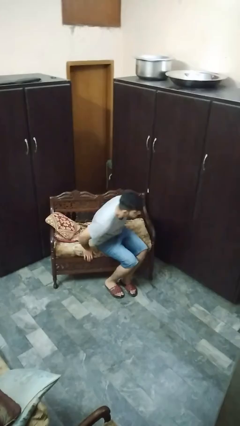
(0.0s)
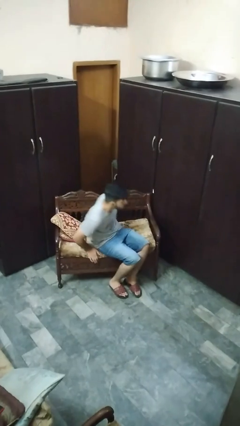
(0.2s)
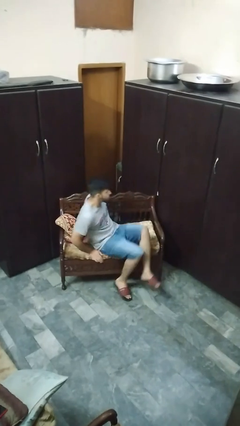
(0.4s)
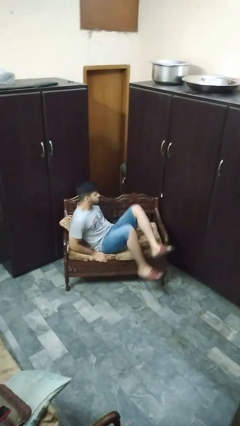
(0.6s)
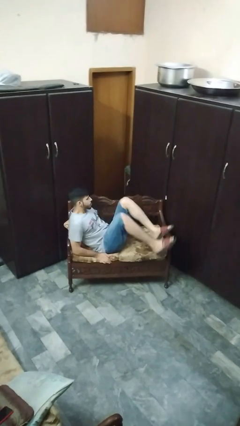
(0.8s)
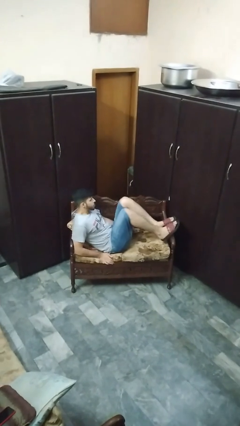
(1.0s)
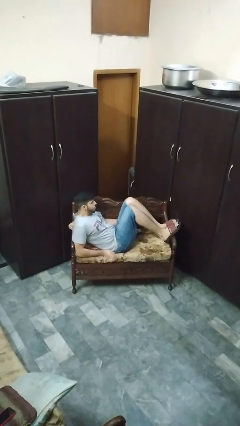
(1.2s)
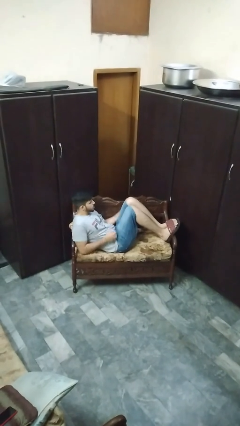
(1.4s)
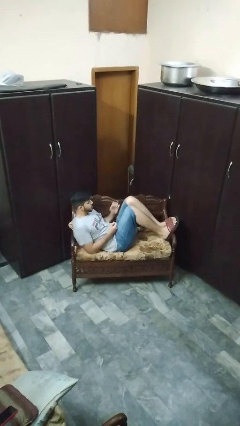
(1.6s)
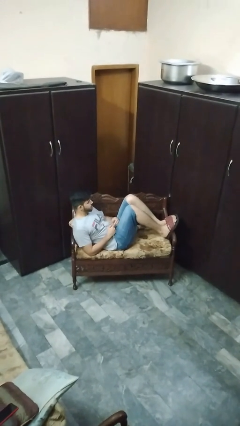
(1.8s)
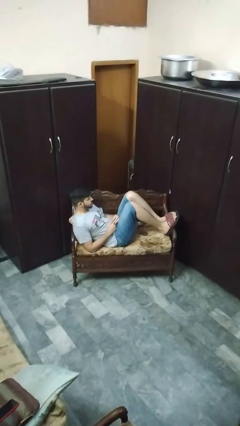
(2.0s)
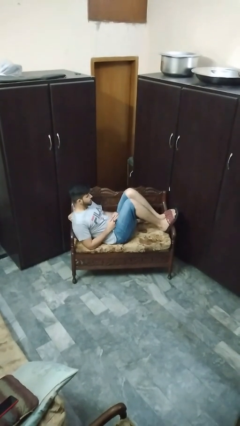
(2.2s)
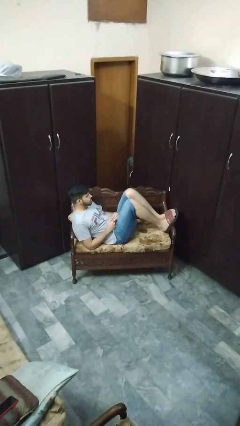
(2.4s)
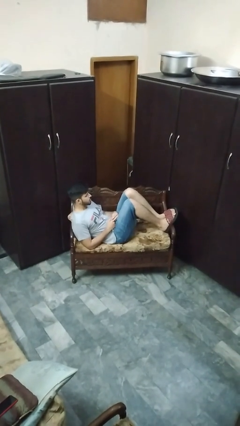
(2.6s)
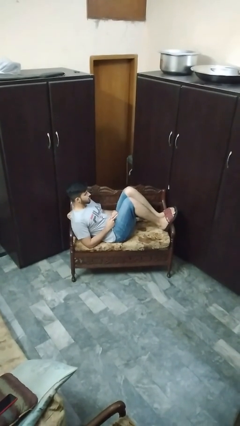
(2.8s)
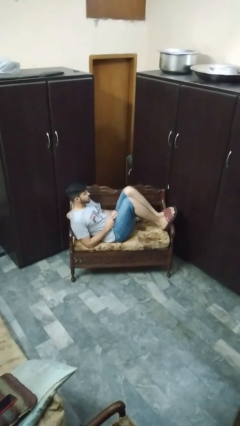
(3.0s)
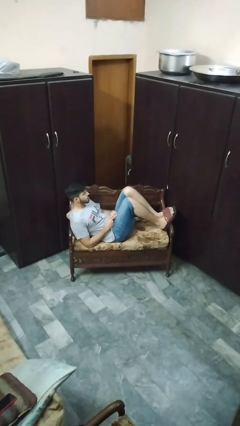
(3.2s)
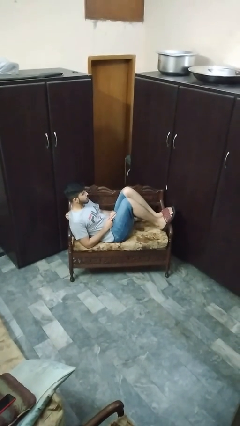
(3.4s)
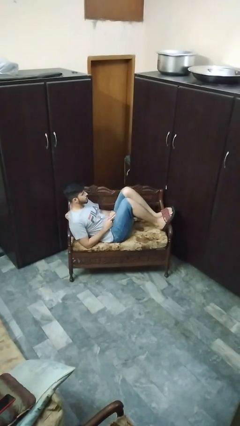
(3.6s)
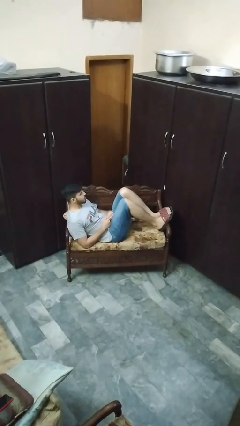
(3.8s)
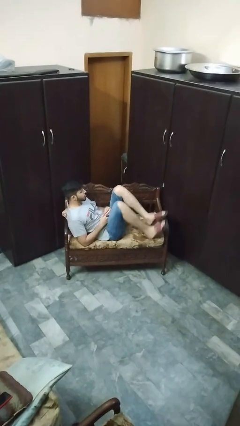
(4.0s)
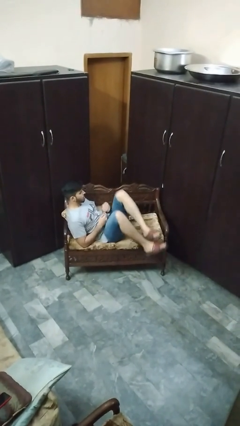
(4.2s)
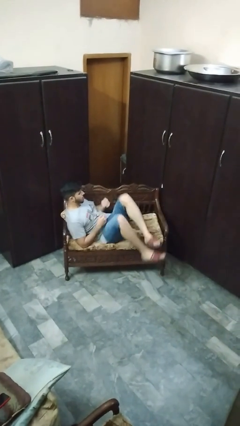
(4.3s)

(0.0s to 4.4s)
person lies down on couch

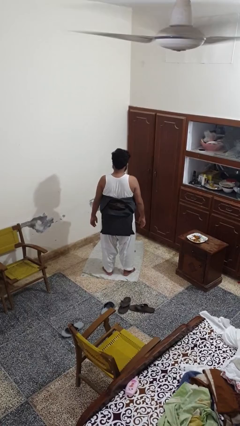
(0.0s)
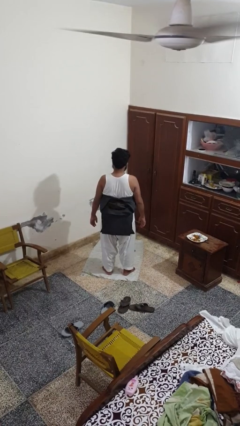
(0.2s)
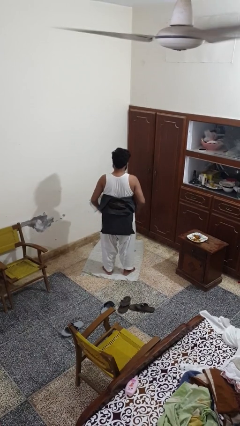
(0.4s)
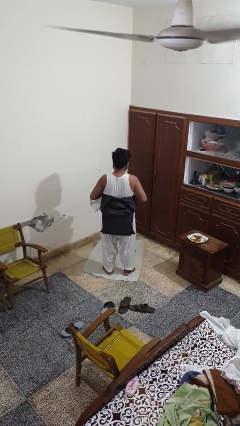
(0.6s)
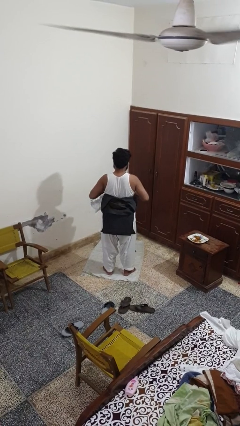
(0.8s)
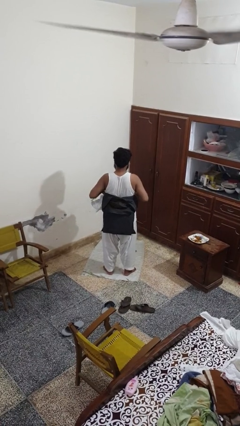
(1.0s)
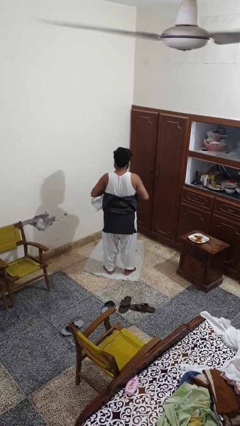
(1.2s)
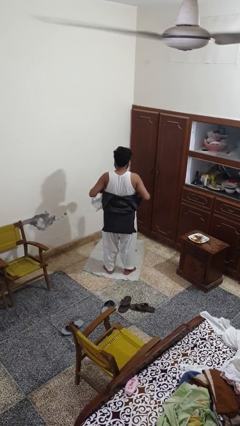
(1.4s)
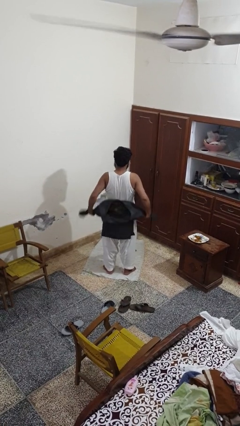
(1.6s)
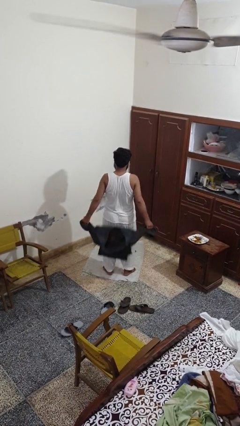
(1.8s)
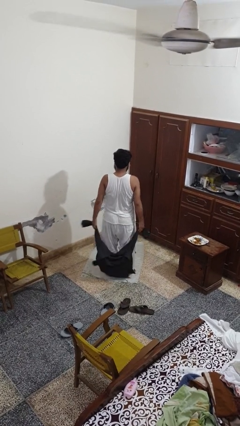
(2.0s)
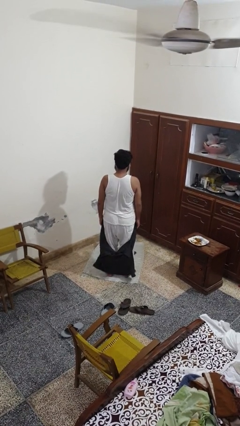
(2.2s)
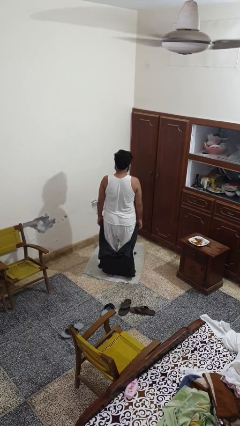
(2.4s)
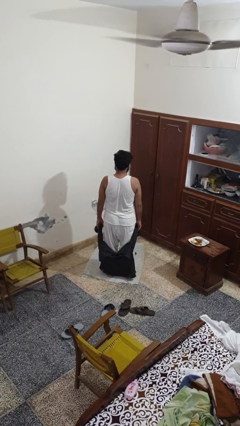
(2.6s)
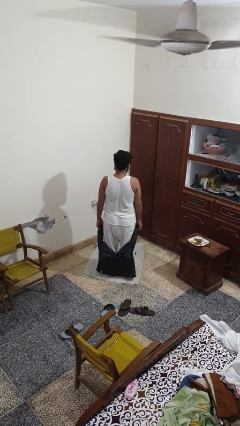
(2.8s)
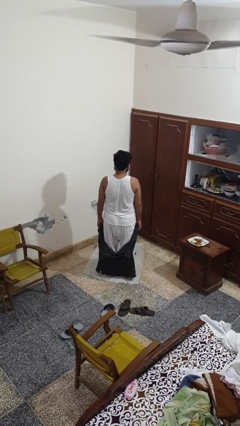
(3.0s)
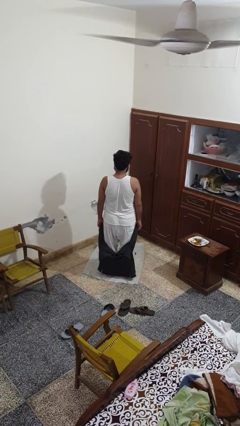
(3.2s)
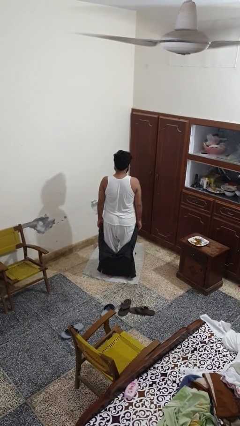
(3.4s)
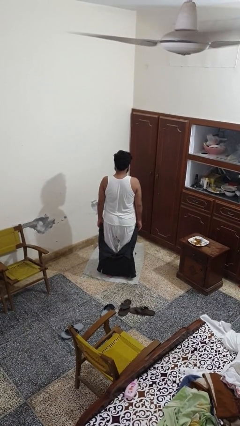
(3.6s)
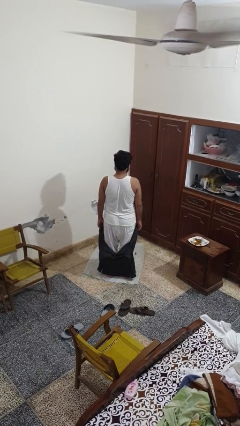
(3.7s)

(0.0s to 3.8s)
person unties jacket around waist

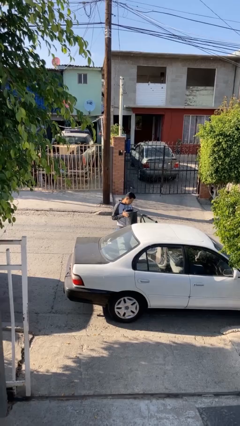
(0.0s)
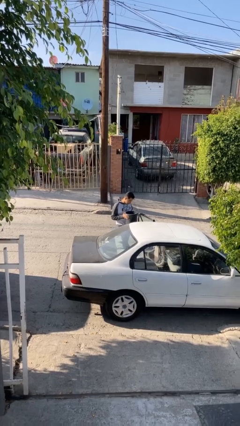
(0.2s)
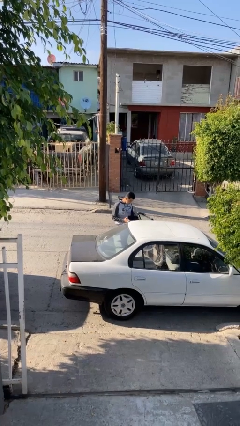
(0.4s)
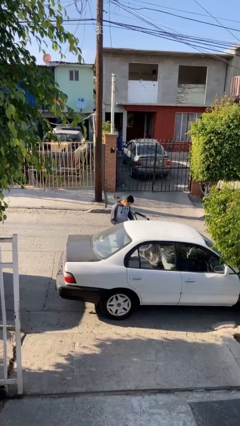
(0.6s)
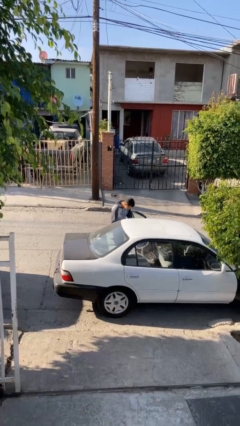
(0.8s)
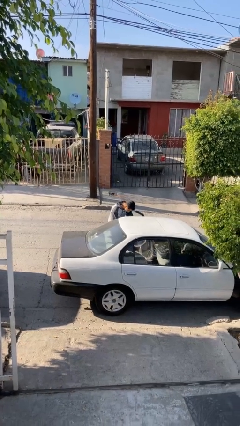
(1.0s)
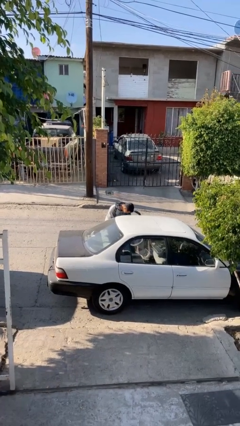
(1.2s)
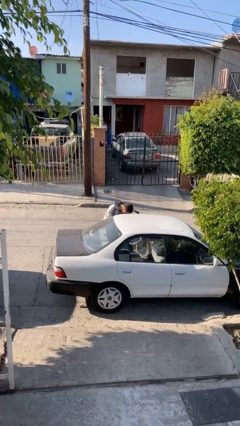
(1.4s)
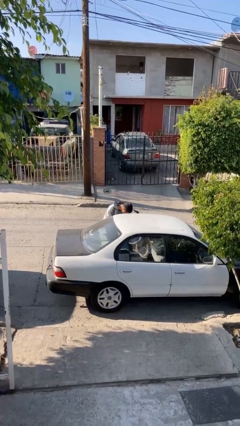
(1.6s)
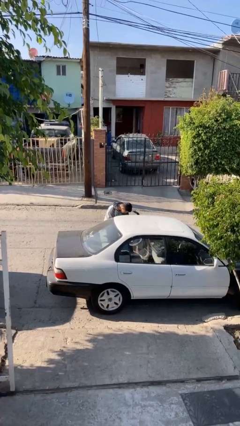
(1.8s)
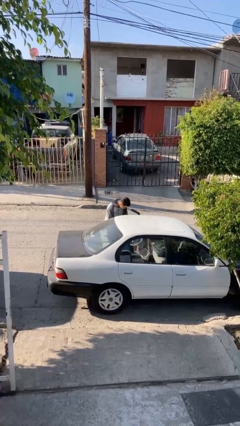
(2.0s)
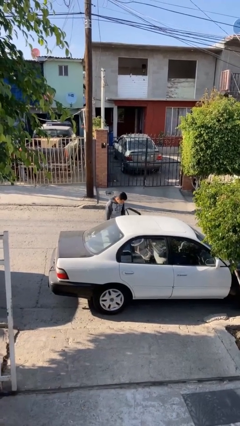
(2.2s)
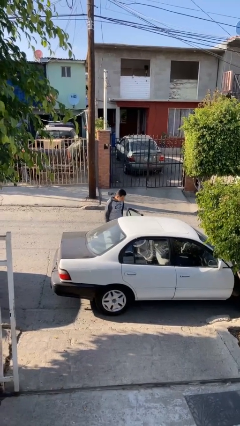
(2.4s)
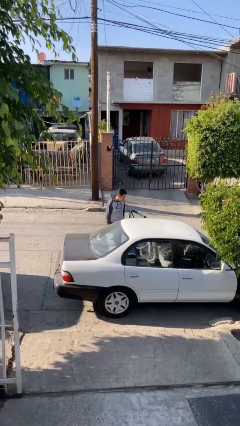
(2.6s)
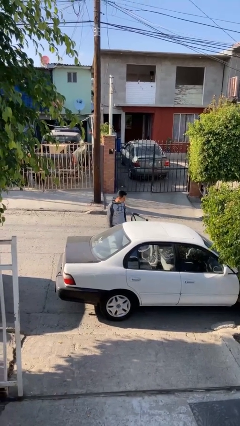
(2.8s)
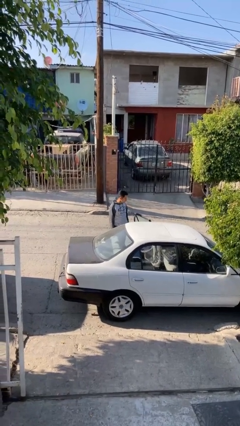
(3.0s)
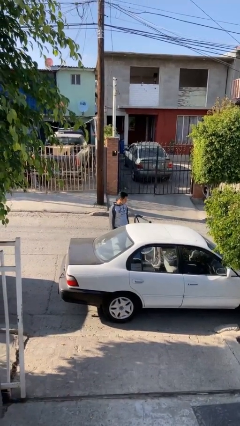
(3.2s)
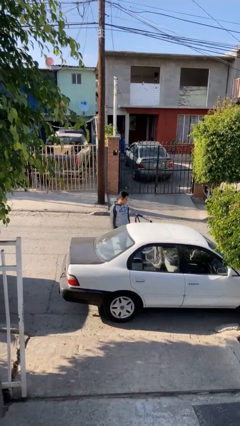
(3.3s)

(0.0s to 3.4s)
person loads car

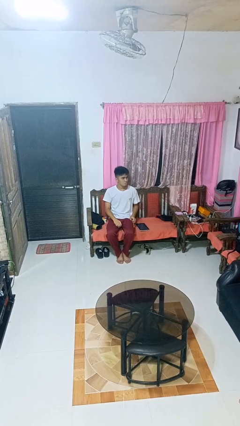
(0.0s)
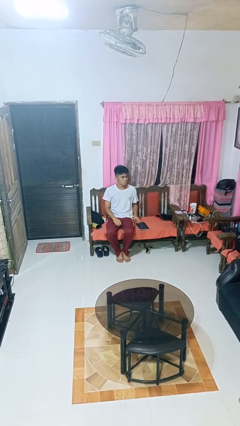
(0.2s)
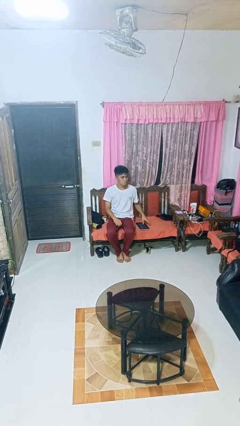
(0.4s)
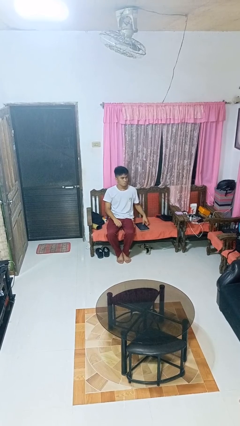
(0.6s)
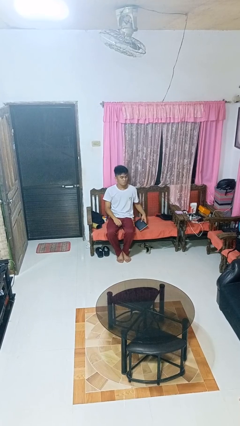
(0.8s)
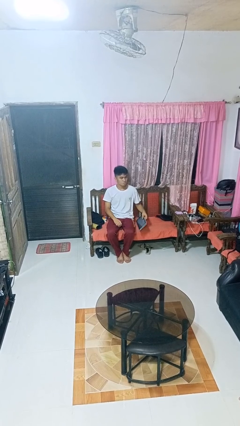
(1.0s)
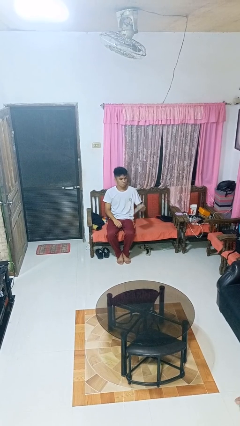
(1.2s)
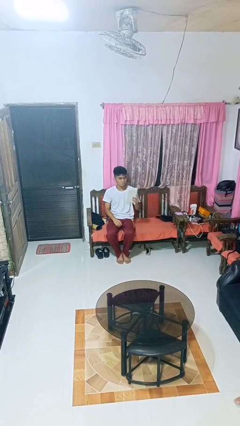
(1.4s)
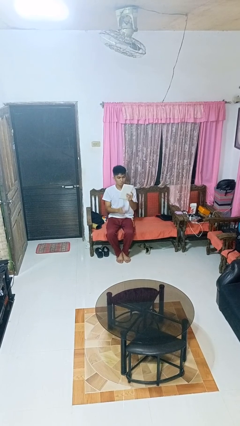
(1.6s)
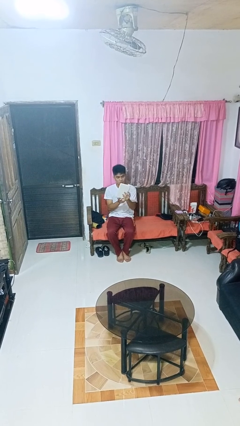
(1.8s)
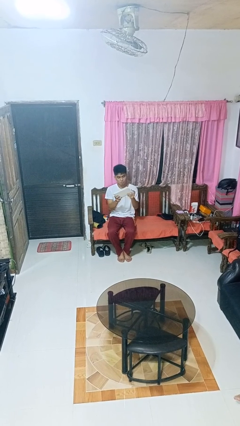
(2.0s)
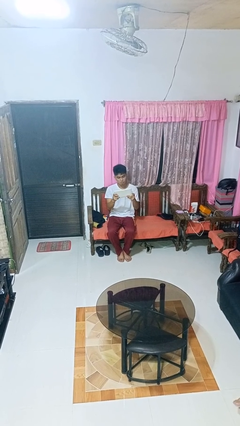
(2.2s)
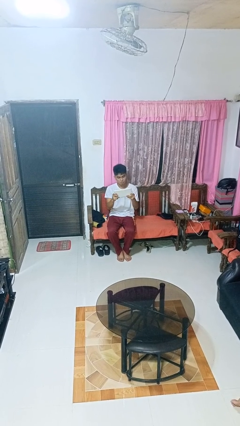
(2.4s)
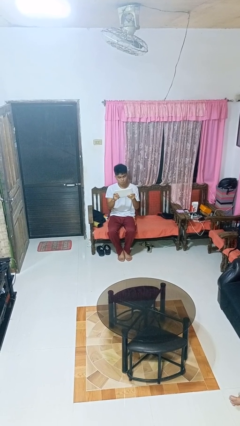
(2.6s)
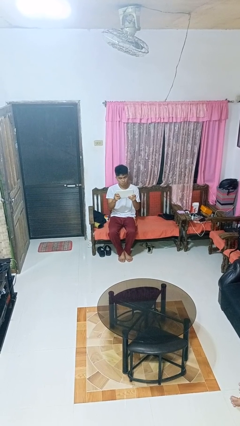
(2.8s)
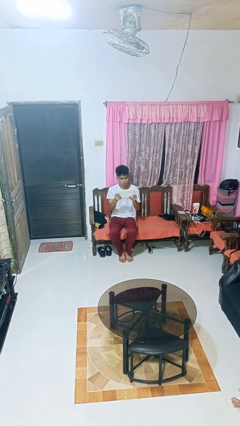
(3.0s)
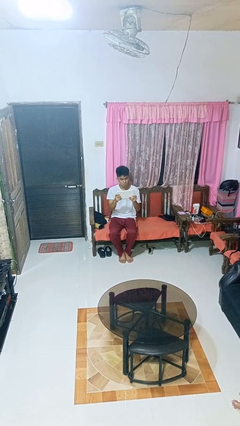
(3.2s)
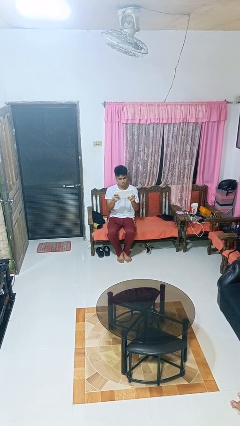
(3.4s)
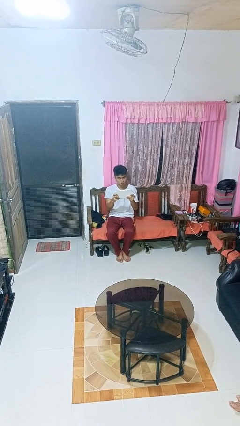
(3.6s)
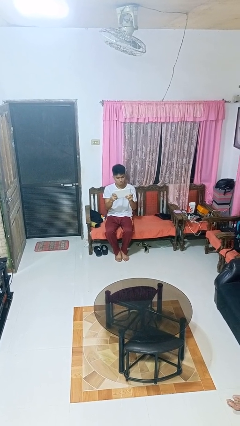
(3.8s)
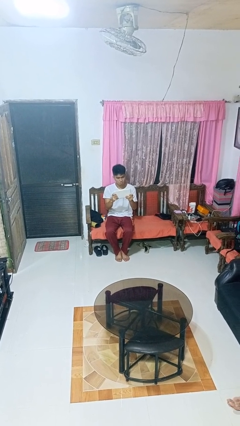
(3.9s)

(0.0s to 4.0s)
person interacts with tablet

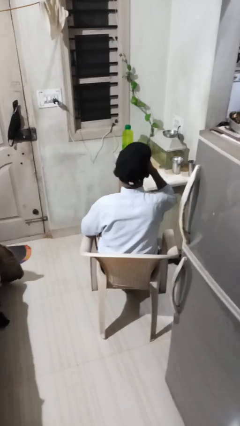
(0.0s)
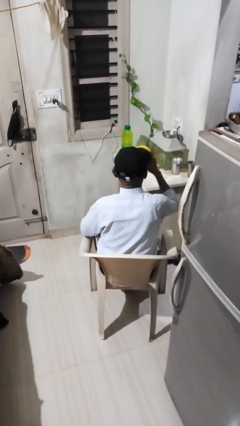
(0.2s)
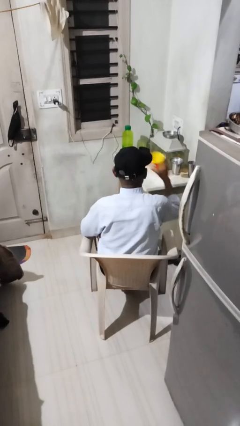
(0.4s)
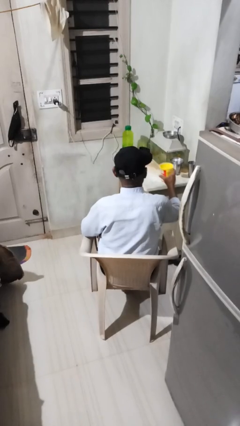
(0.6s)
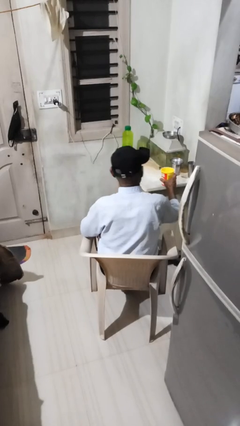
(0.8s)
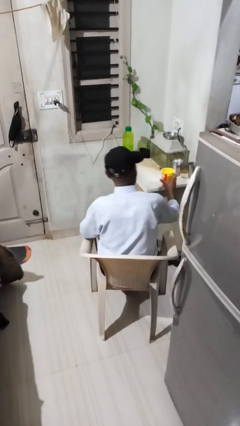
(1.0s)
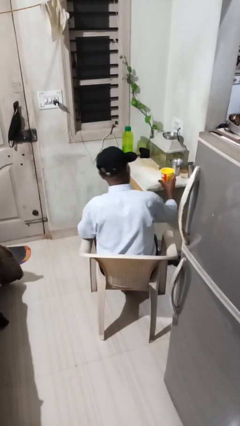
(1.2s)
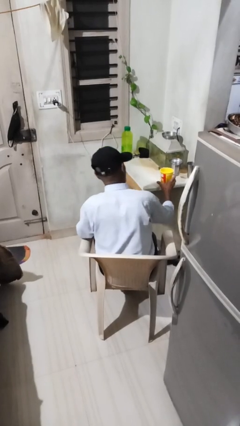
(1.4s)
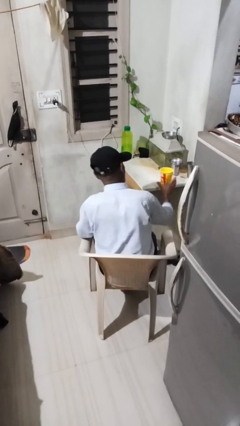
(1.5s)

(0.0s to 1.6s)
person puts down object on table
